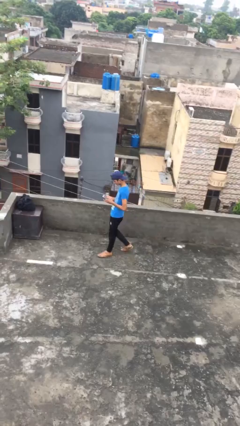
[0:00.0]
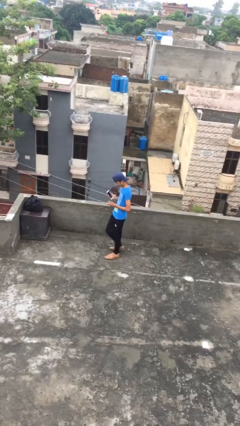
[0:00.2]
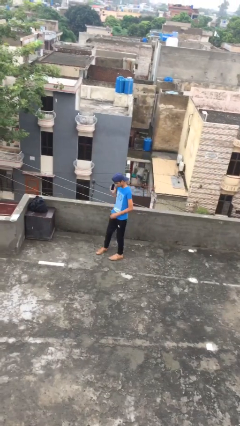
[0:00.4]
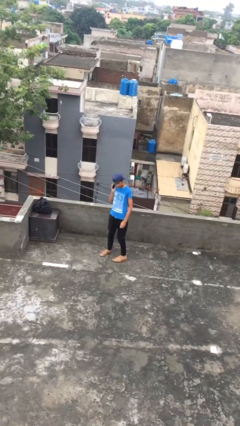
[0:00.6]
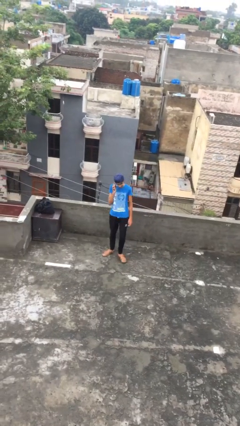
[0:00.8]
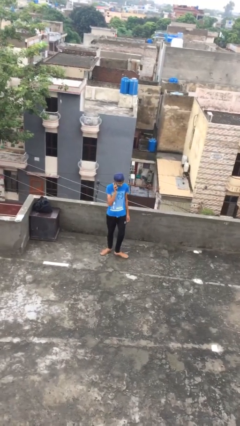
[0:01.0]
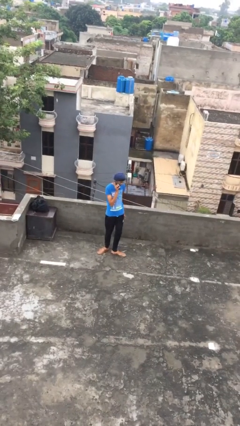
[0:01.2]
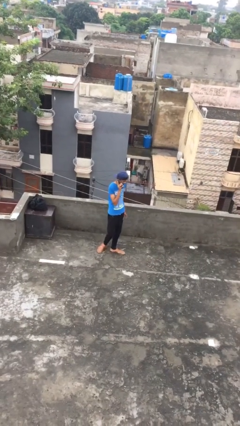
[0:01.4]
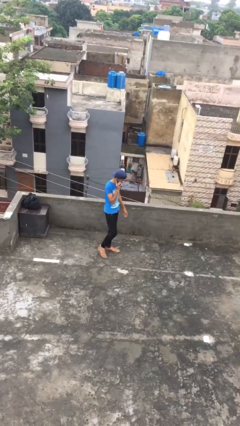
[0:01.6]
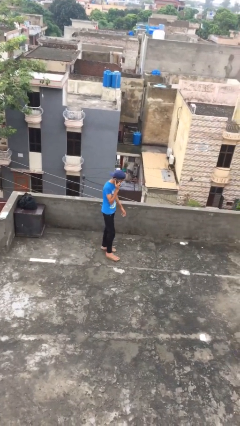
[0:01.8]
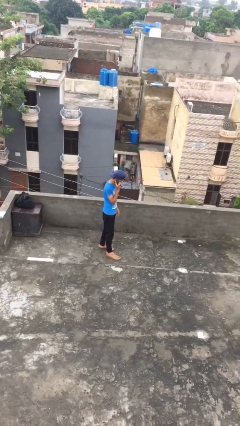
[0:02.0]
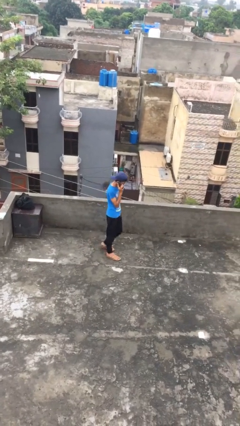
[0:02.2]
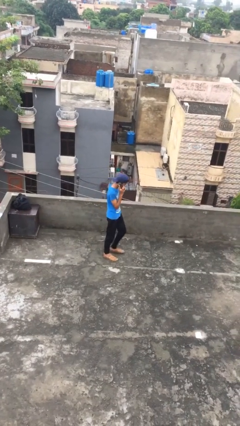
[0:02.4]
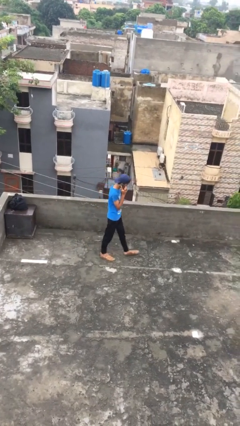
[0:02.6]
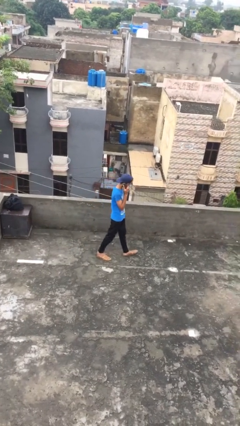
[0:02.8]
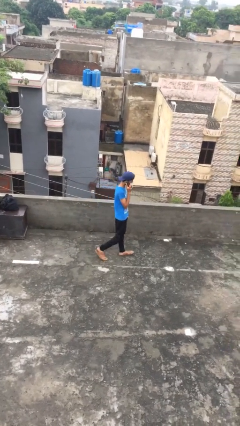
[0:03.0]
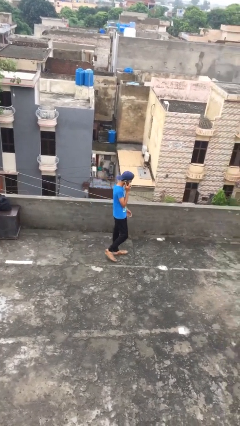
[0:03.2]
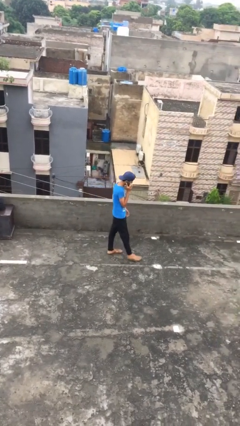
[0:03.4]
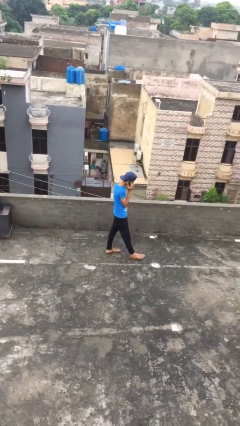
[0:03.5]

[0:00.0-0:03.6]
person talks on phone

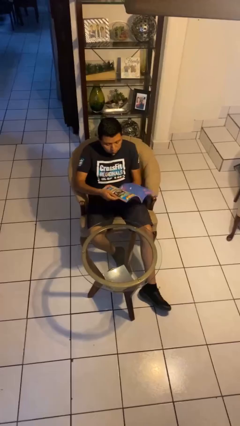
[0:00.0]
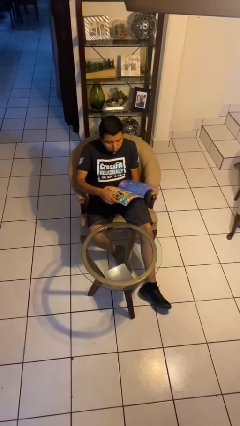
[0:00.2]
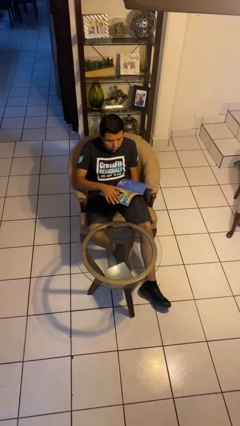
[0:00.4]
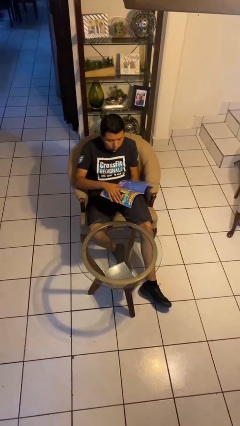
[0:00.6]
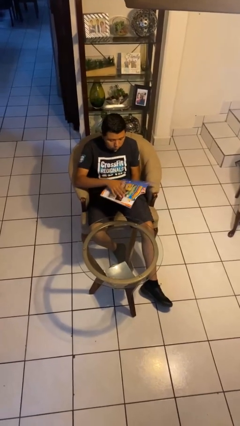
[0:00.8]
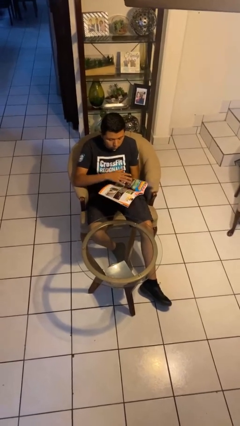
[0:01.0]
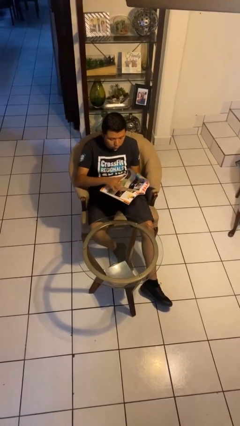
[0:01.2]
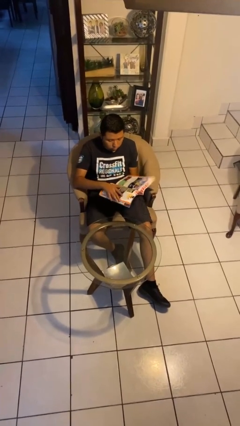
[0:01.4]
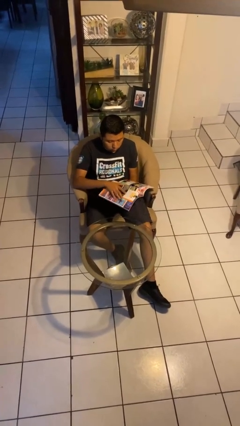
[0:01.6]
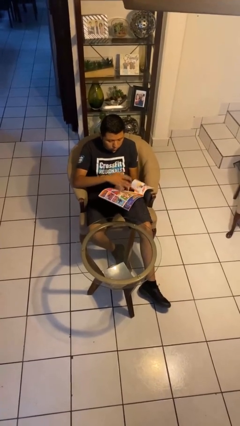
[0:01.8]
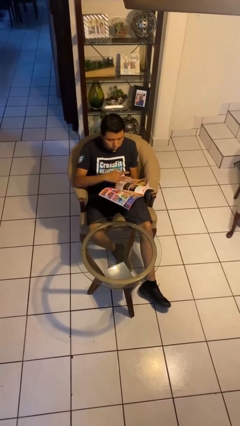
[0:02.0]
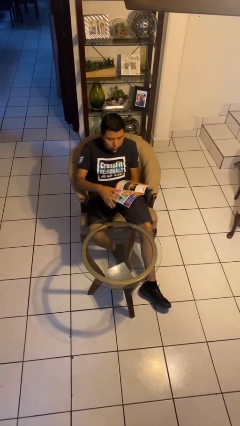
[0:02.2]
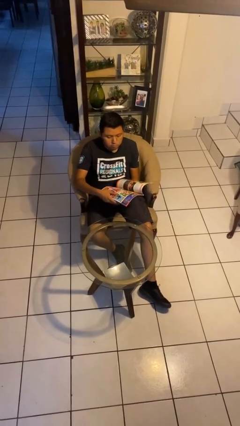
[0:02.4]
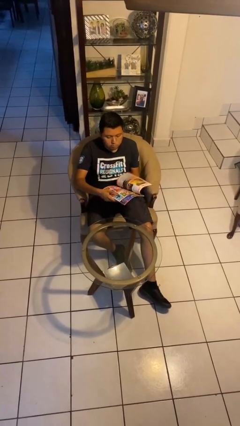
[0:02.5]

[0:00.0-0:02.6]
person reads magazine

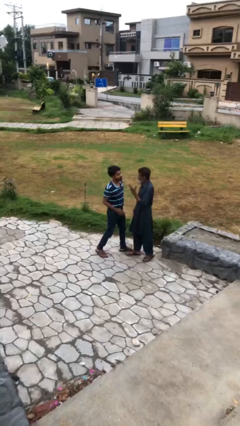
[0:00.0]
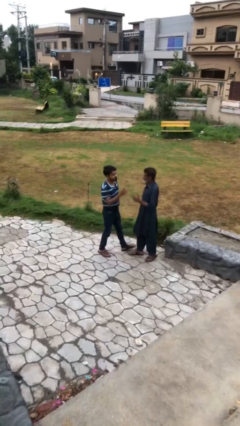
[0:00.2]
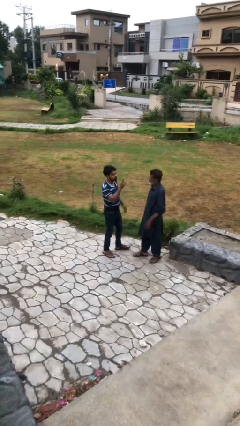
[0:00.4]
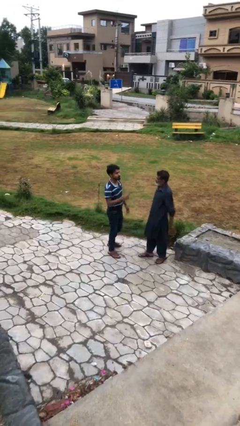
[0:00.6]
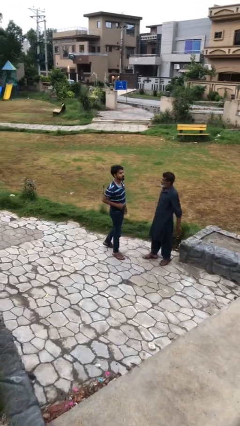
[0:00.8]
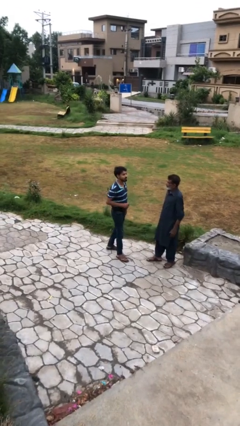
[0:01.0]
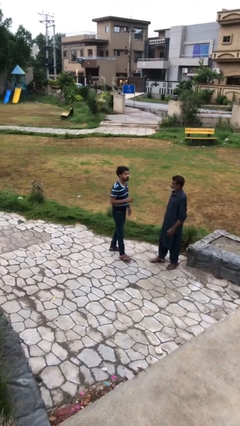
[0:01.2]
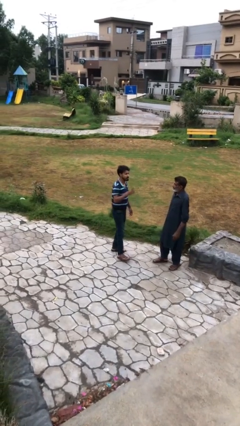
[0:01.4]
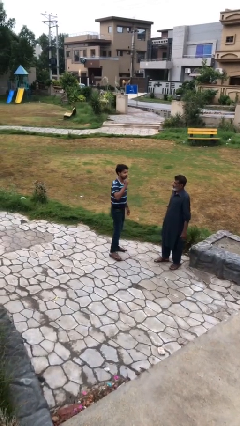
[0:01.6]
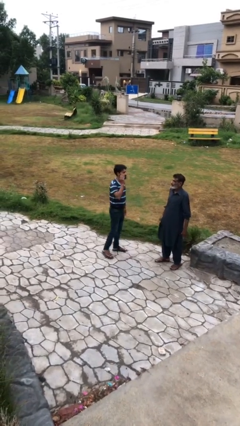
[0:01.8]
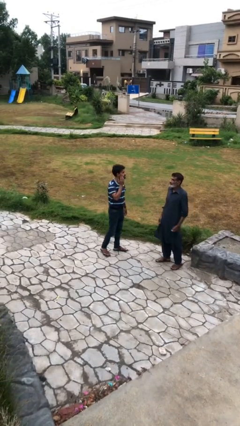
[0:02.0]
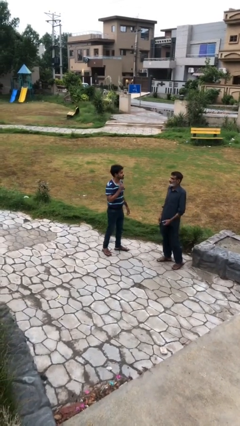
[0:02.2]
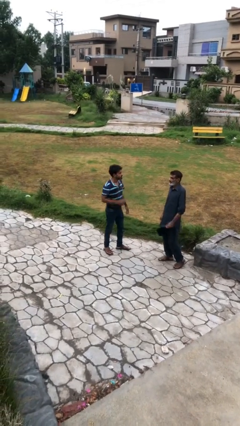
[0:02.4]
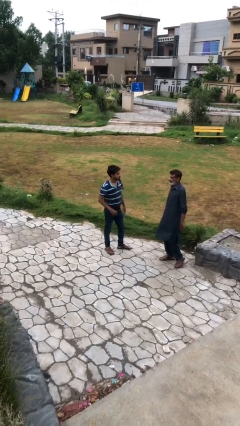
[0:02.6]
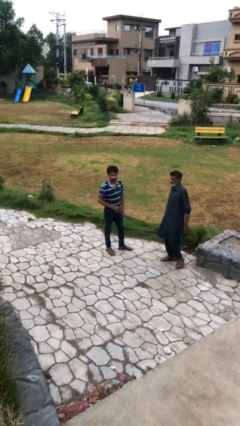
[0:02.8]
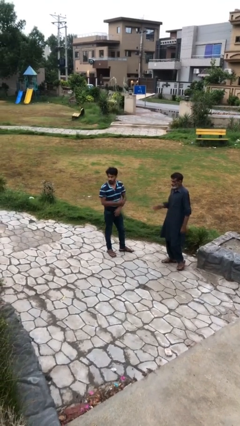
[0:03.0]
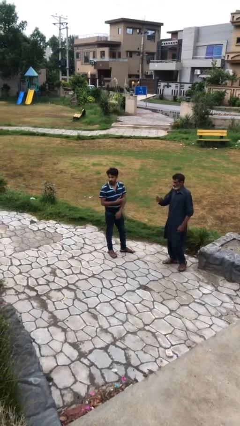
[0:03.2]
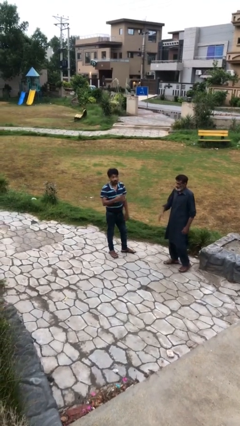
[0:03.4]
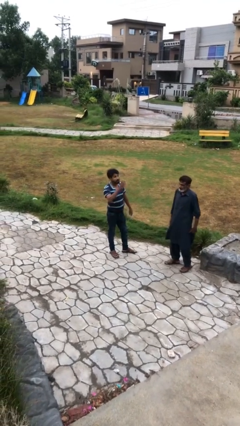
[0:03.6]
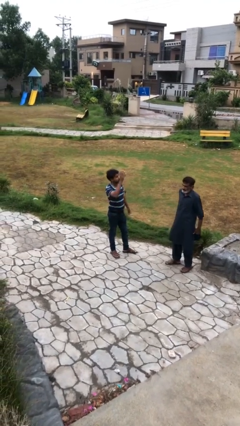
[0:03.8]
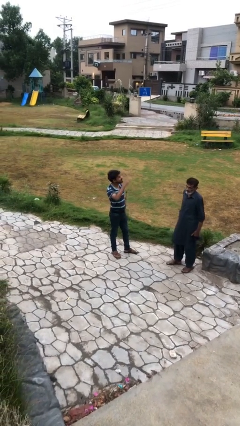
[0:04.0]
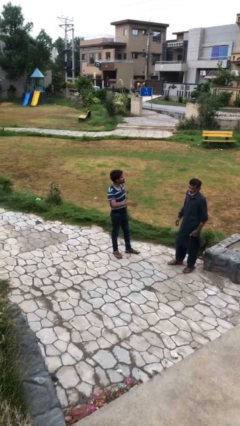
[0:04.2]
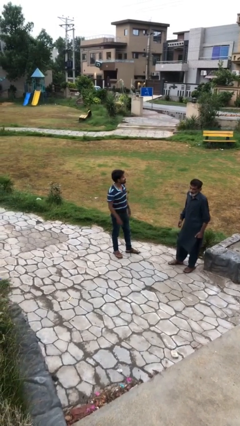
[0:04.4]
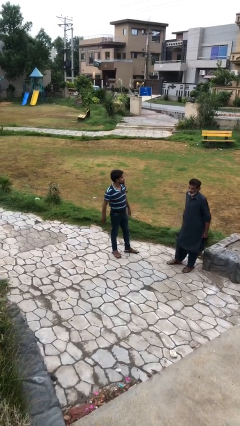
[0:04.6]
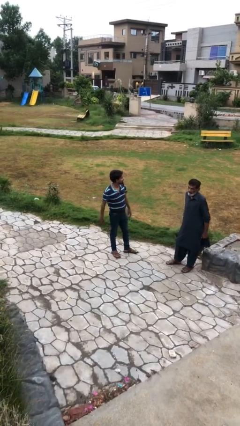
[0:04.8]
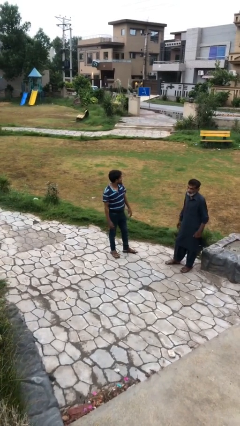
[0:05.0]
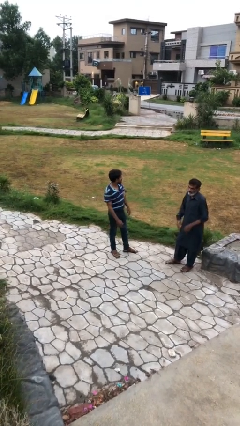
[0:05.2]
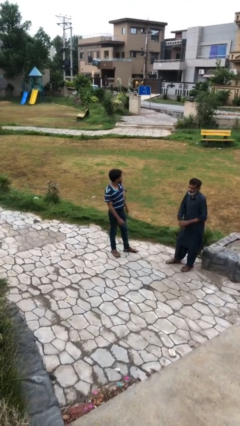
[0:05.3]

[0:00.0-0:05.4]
person talks to person

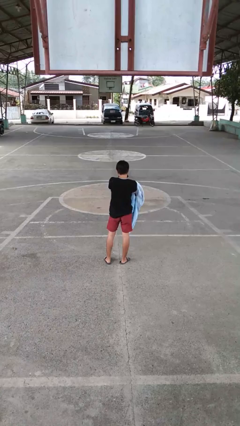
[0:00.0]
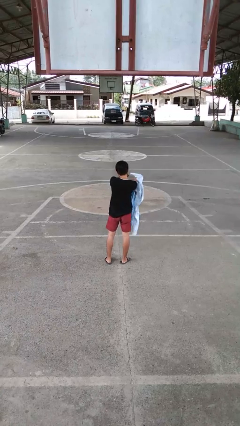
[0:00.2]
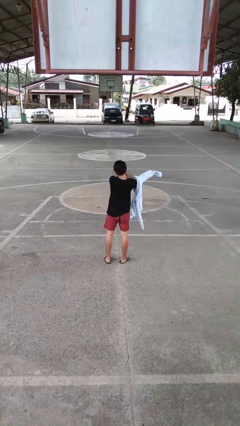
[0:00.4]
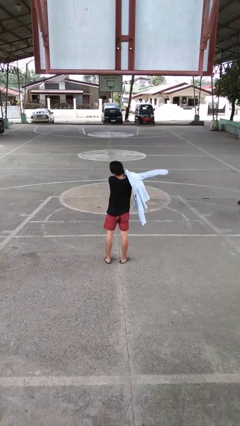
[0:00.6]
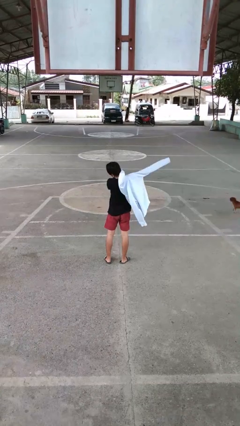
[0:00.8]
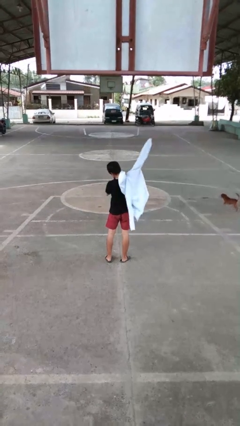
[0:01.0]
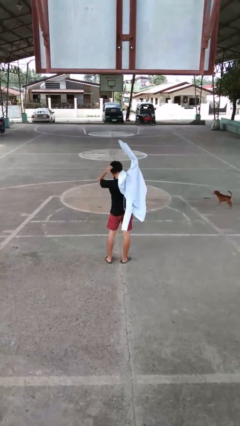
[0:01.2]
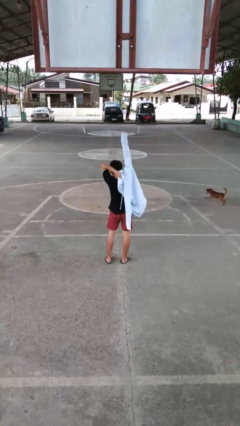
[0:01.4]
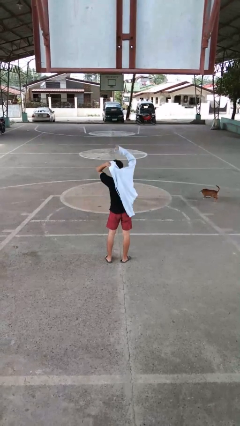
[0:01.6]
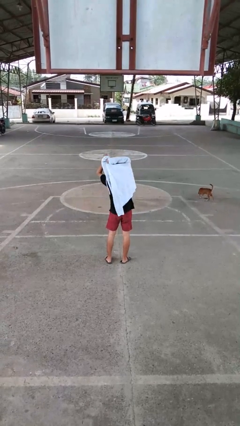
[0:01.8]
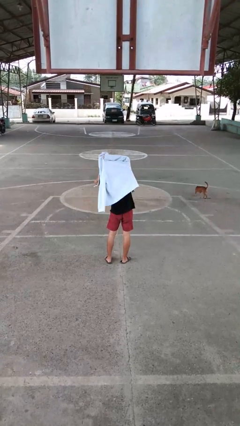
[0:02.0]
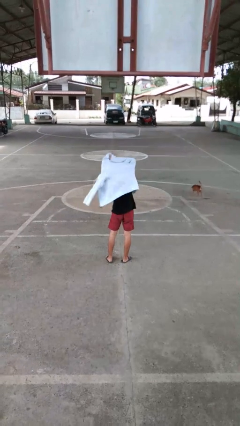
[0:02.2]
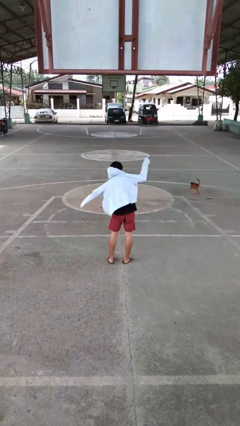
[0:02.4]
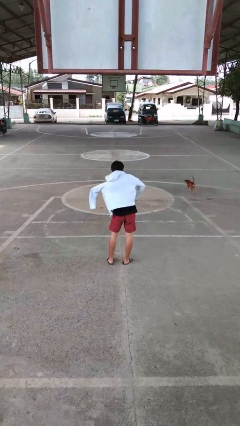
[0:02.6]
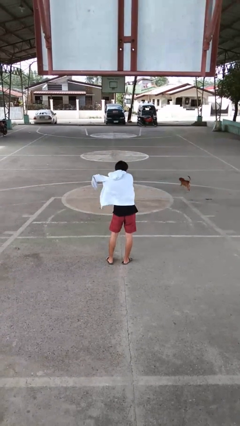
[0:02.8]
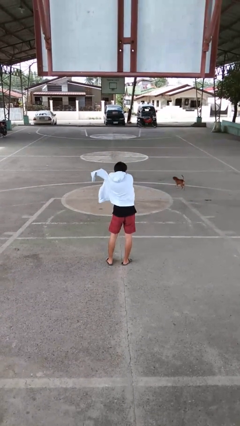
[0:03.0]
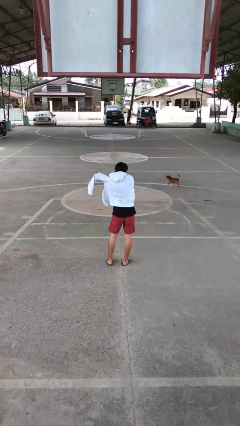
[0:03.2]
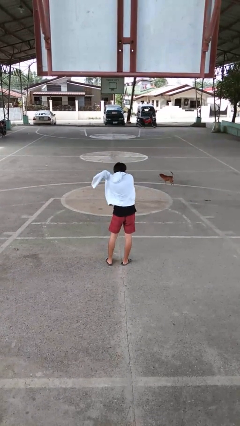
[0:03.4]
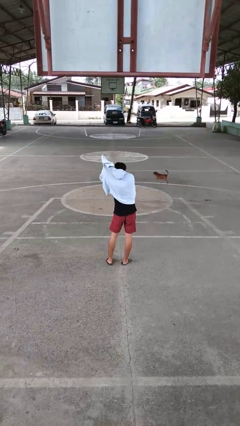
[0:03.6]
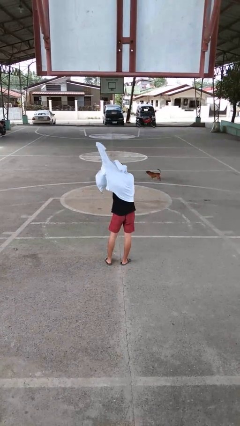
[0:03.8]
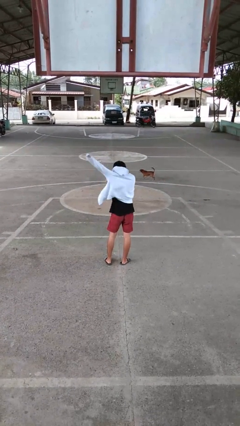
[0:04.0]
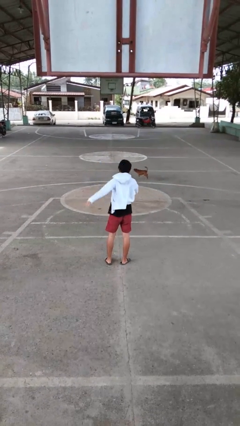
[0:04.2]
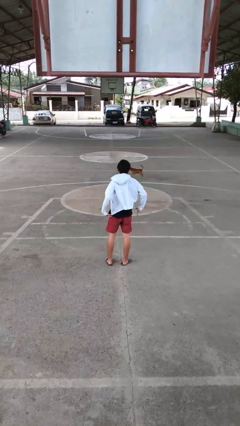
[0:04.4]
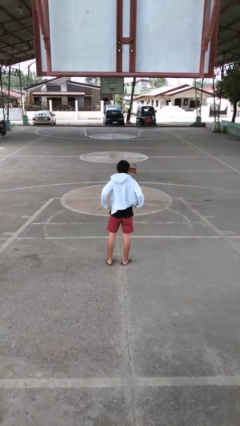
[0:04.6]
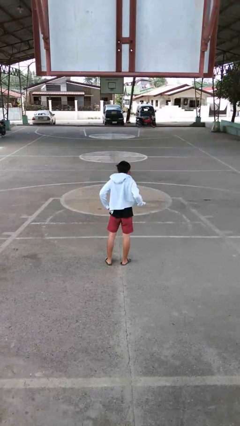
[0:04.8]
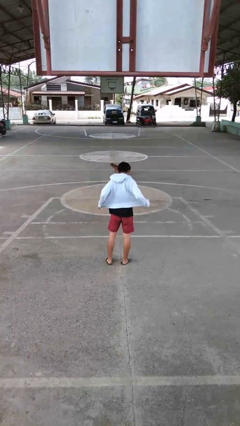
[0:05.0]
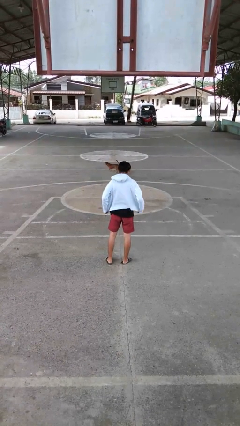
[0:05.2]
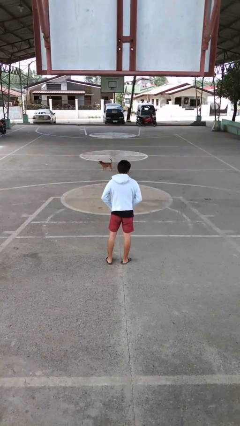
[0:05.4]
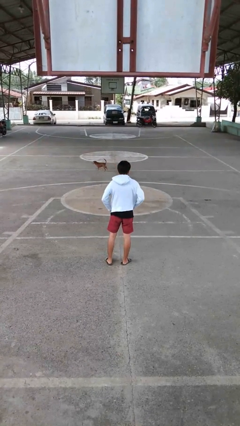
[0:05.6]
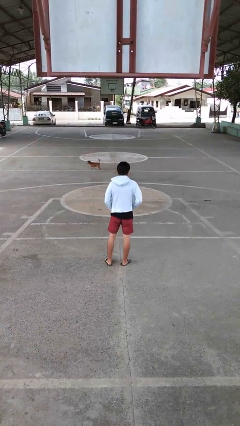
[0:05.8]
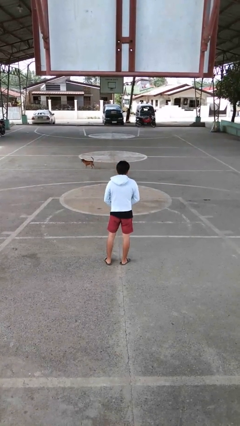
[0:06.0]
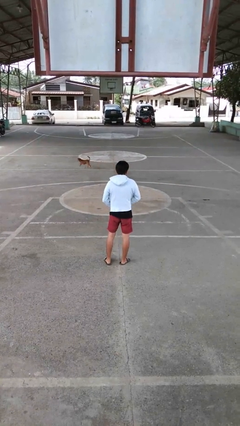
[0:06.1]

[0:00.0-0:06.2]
person puts on jacket
